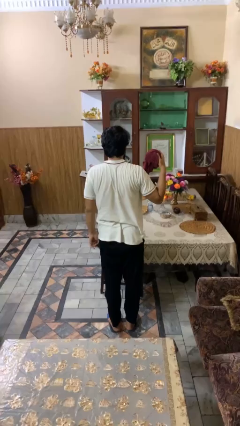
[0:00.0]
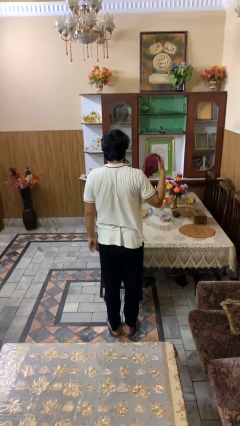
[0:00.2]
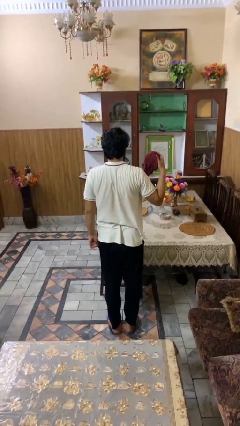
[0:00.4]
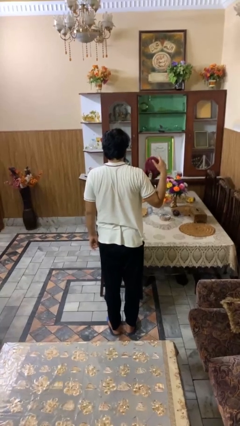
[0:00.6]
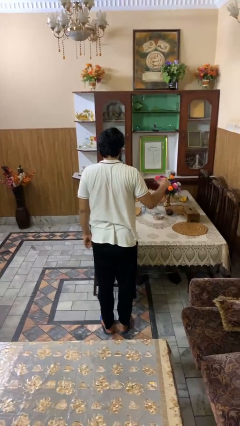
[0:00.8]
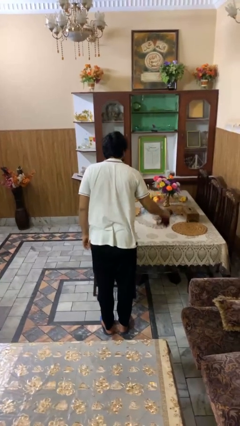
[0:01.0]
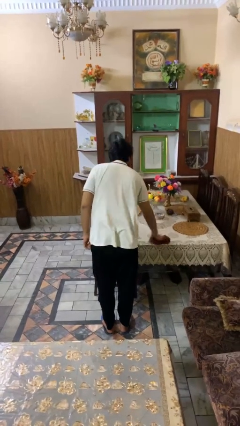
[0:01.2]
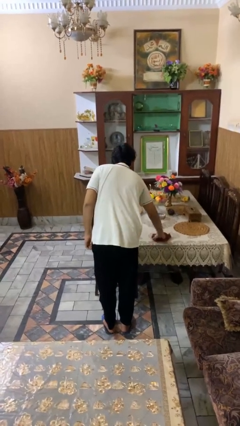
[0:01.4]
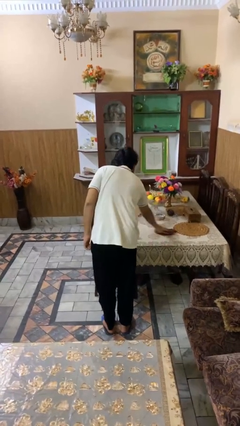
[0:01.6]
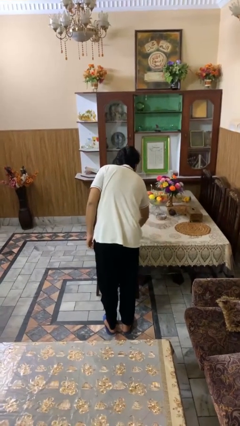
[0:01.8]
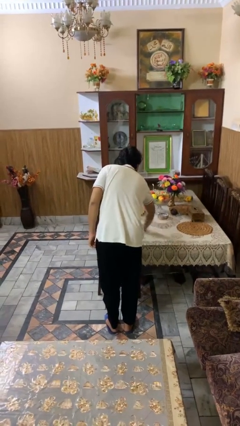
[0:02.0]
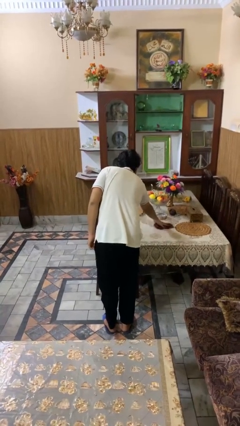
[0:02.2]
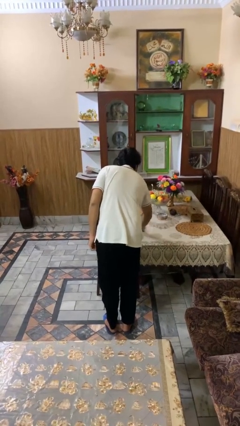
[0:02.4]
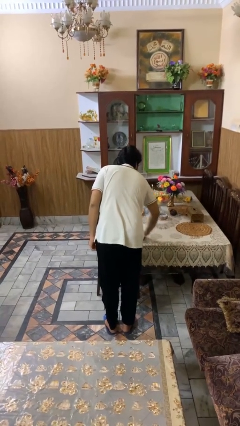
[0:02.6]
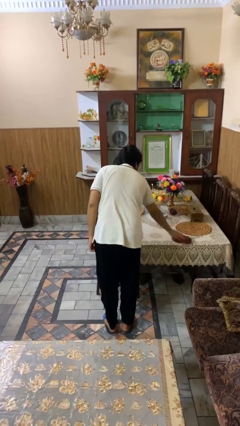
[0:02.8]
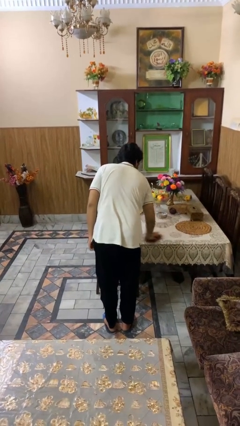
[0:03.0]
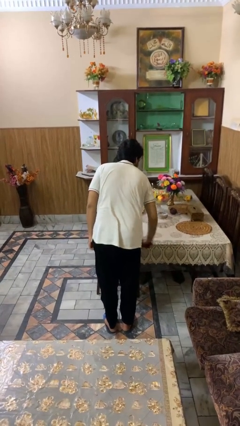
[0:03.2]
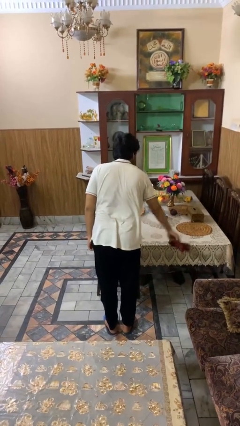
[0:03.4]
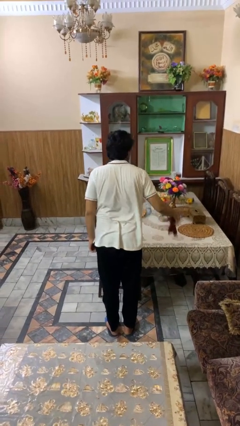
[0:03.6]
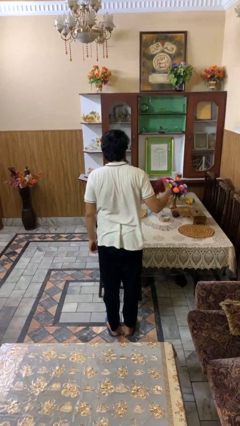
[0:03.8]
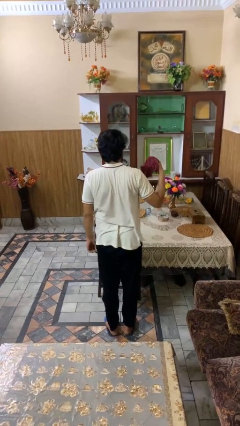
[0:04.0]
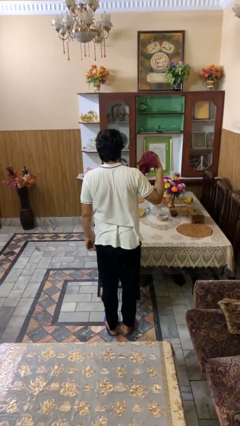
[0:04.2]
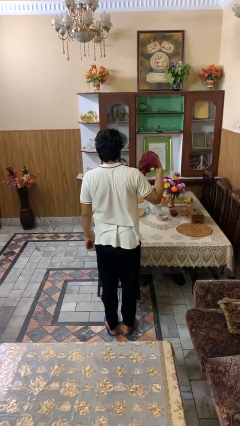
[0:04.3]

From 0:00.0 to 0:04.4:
person cleans table with rag

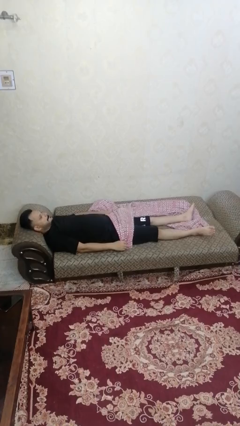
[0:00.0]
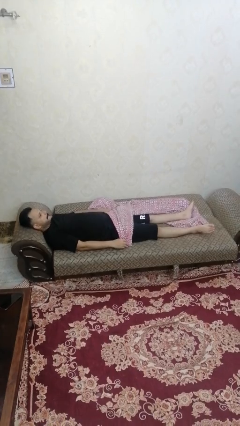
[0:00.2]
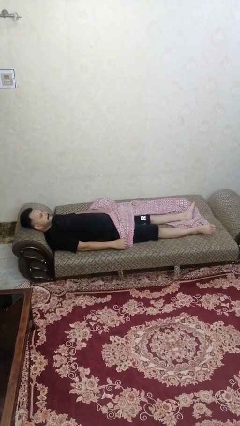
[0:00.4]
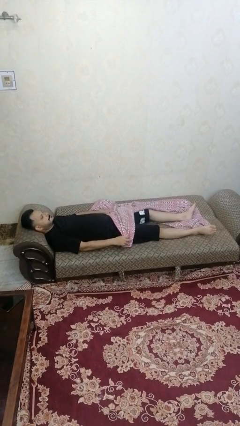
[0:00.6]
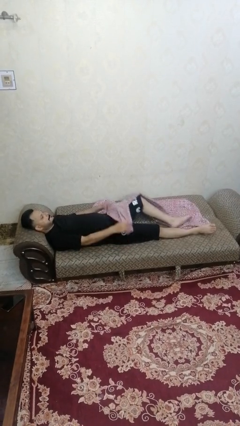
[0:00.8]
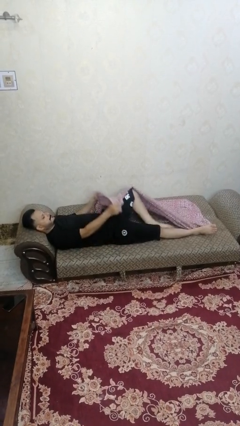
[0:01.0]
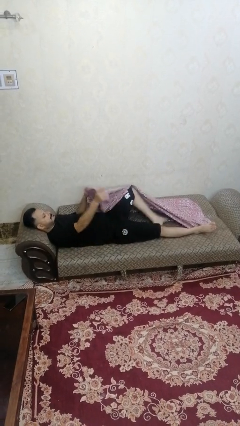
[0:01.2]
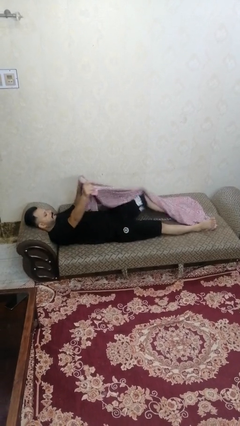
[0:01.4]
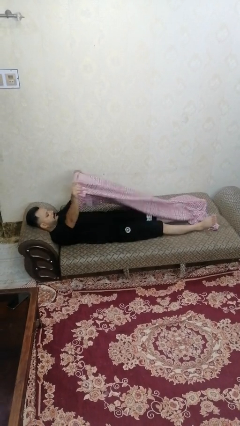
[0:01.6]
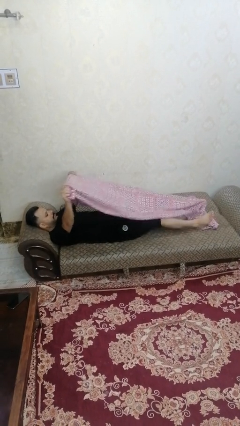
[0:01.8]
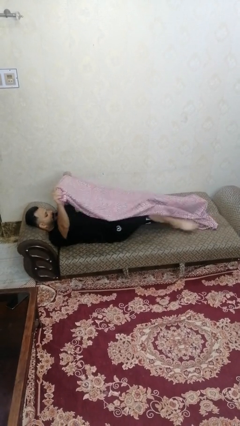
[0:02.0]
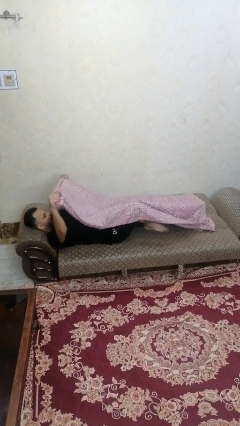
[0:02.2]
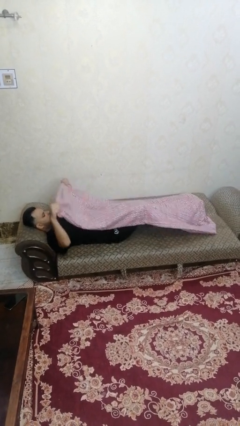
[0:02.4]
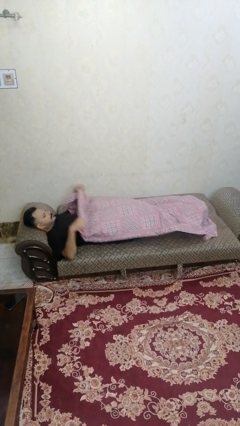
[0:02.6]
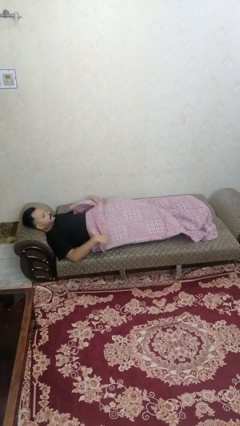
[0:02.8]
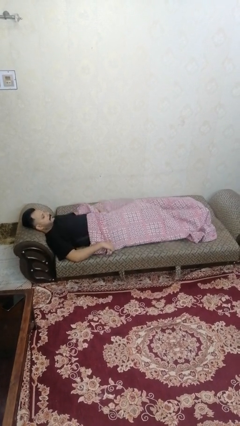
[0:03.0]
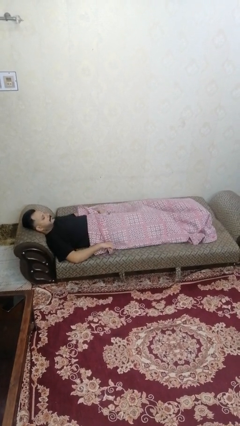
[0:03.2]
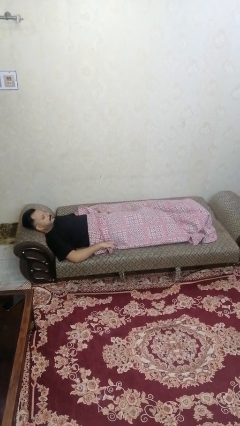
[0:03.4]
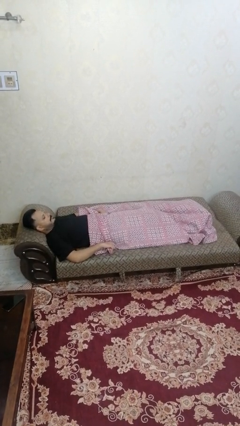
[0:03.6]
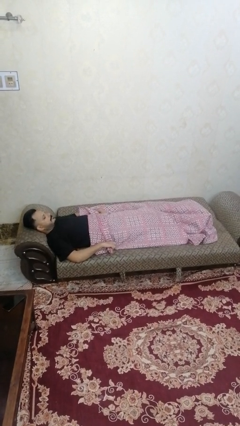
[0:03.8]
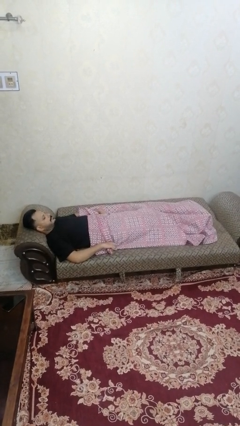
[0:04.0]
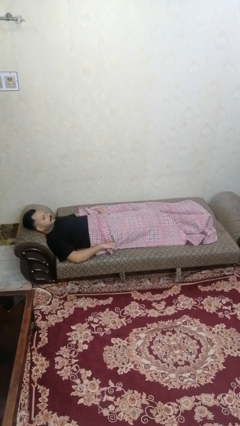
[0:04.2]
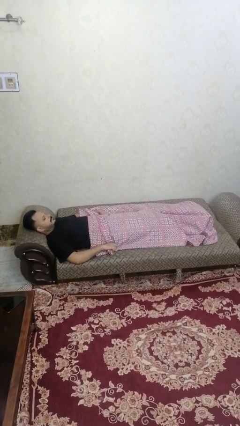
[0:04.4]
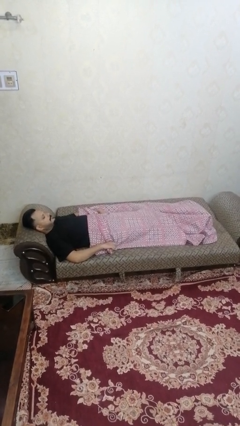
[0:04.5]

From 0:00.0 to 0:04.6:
person covers with bedsheets

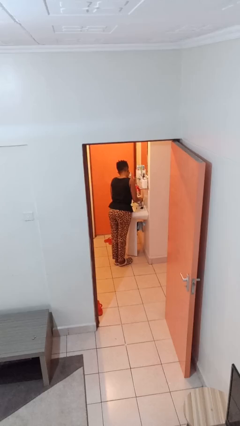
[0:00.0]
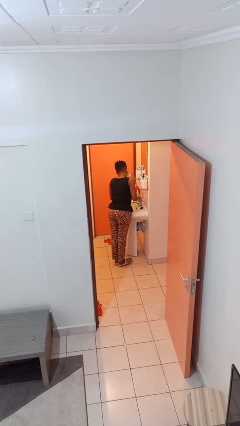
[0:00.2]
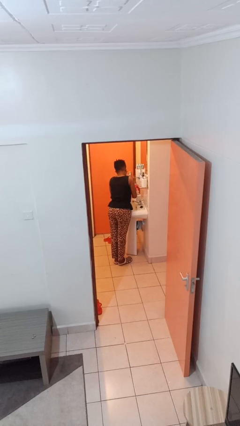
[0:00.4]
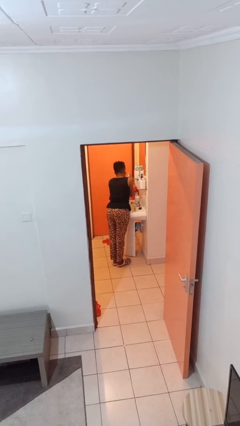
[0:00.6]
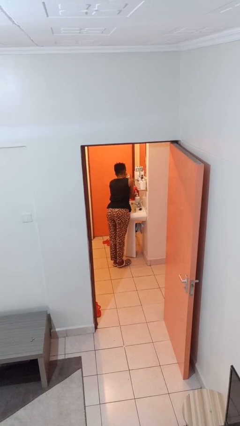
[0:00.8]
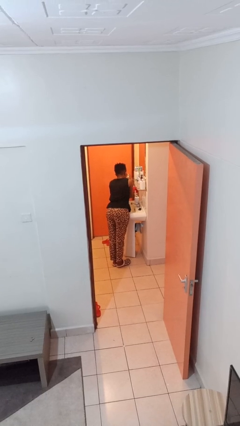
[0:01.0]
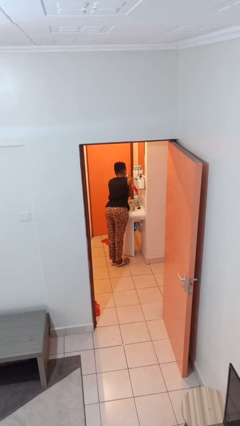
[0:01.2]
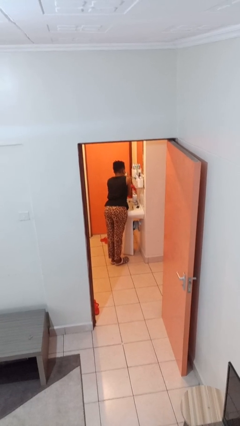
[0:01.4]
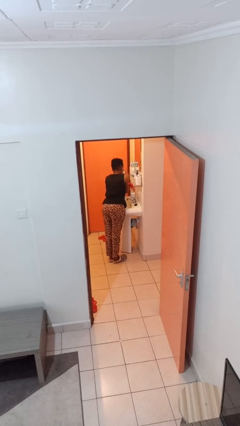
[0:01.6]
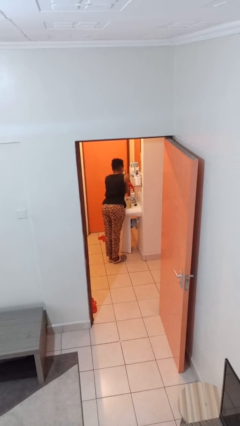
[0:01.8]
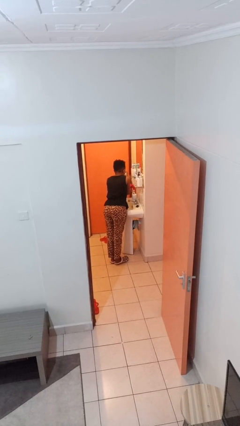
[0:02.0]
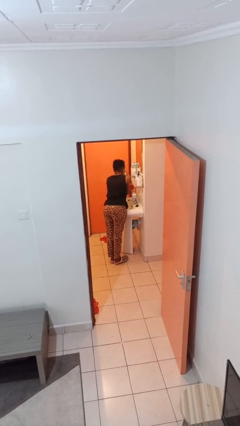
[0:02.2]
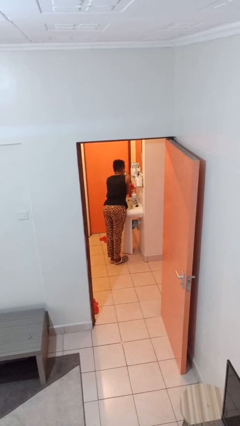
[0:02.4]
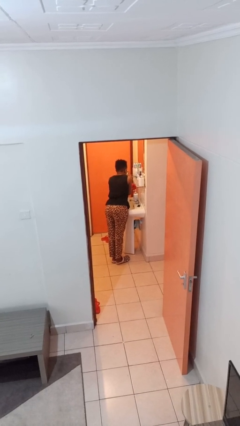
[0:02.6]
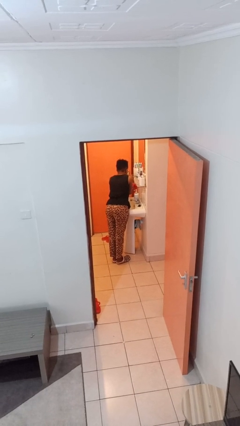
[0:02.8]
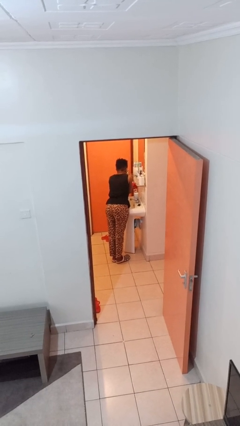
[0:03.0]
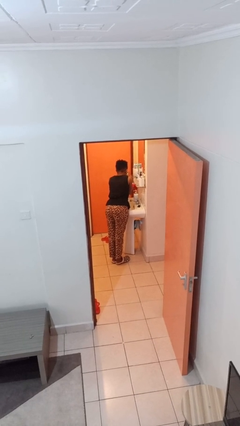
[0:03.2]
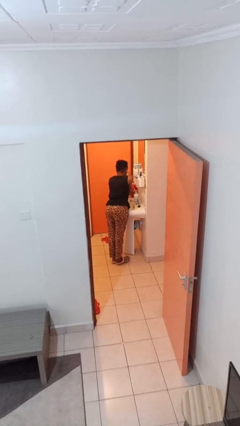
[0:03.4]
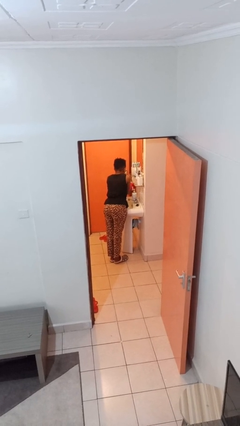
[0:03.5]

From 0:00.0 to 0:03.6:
person dries hands with towel

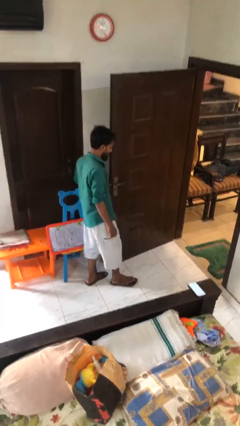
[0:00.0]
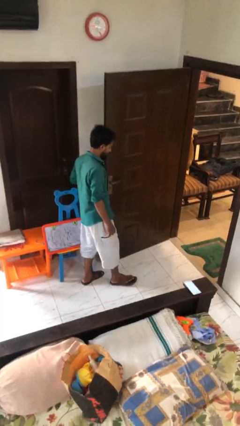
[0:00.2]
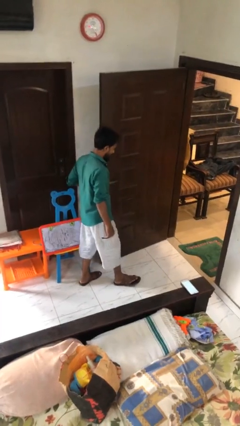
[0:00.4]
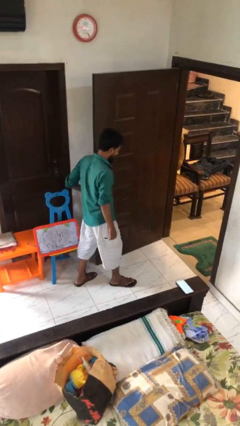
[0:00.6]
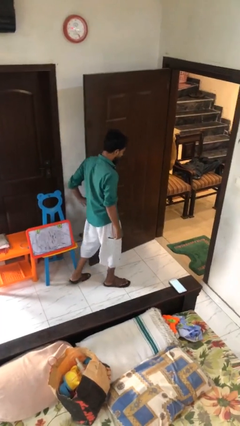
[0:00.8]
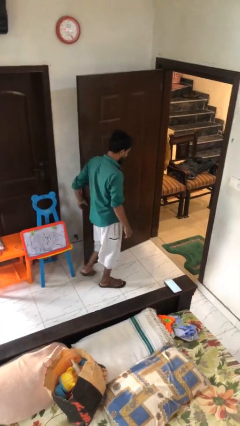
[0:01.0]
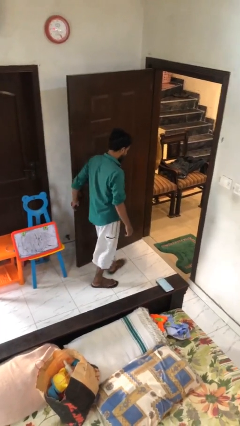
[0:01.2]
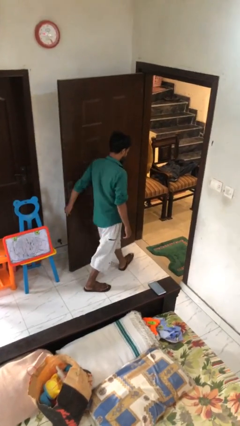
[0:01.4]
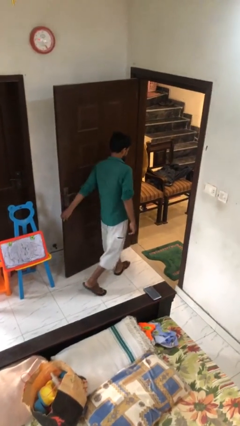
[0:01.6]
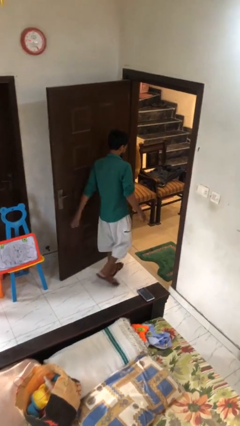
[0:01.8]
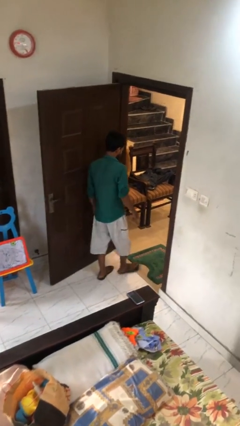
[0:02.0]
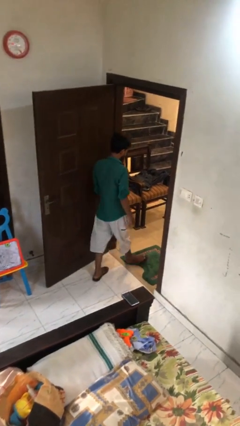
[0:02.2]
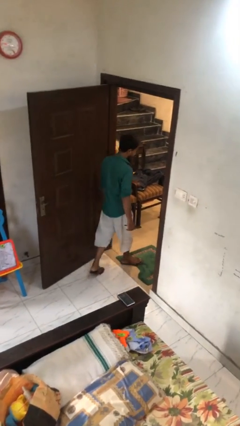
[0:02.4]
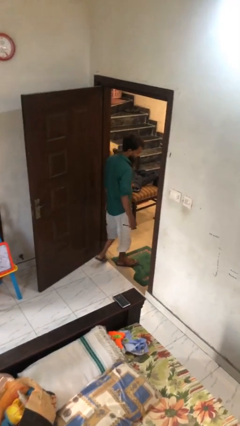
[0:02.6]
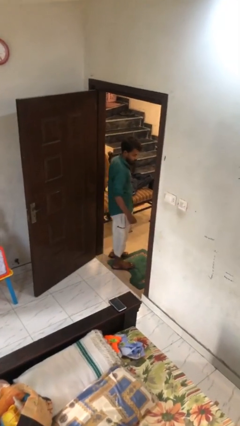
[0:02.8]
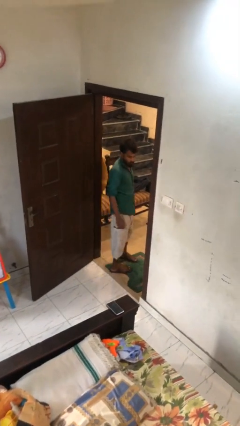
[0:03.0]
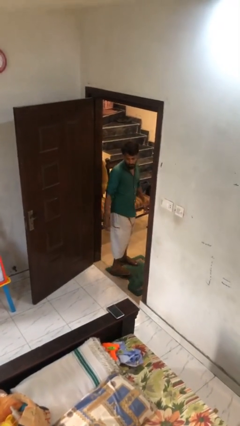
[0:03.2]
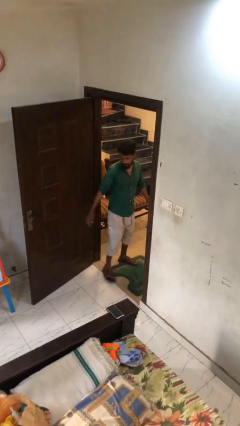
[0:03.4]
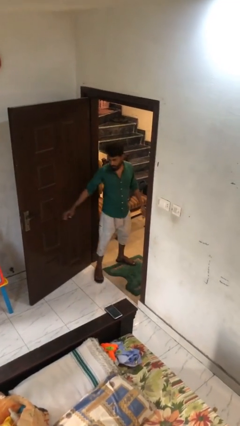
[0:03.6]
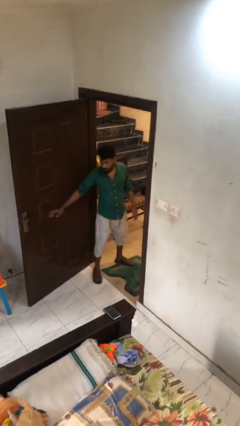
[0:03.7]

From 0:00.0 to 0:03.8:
person exits scene through structure

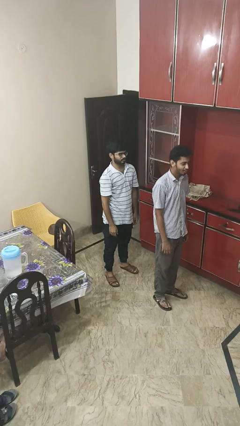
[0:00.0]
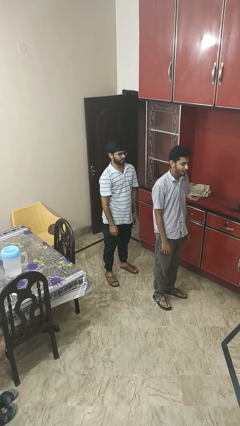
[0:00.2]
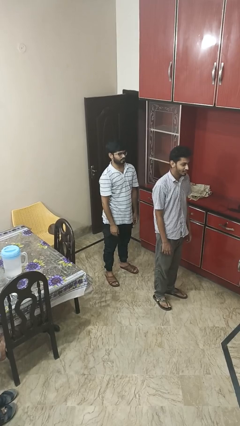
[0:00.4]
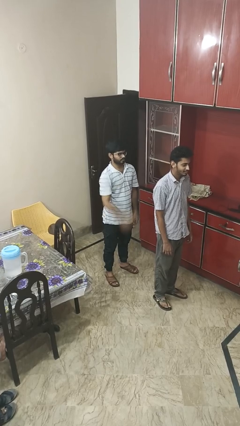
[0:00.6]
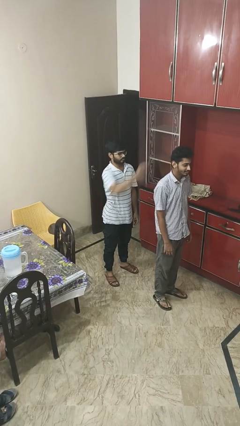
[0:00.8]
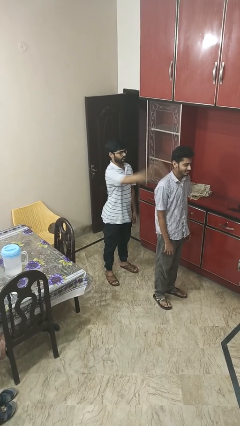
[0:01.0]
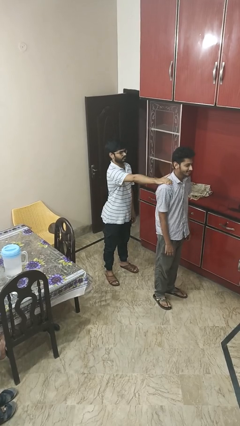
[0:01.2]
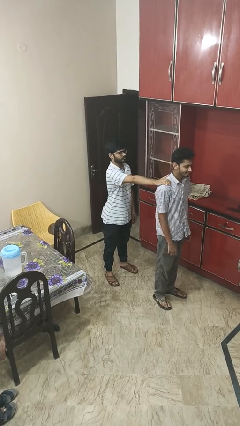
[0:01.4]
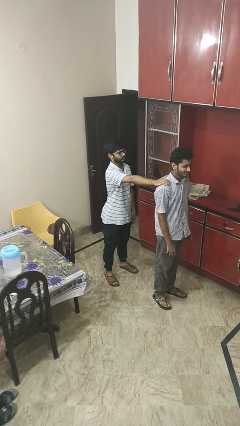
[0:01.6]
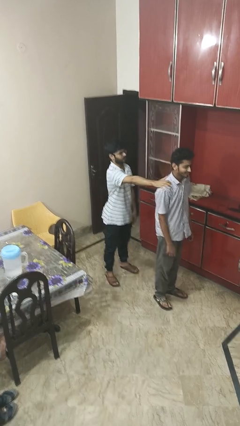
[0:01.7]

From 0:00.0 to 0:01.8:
person grabs person by shoulder
